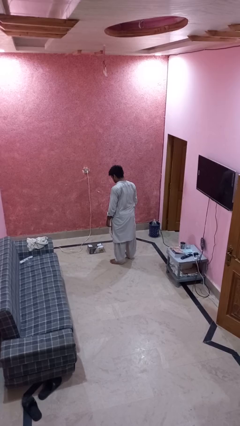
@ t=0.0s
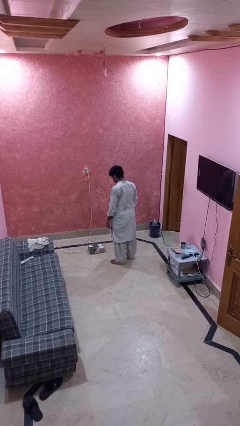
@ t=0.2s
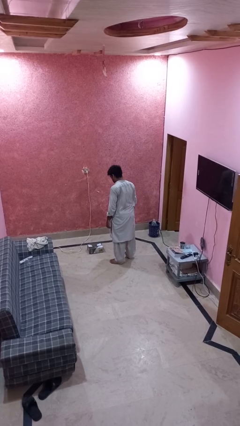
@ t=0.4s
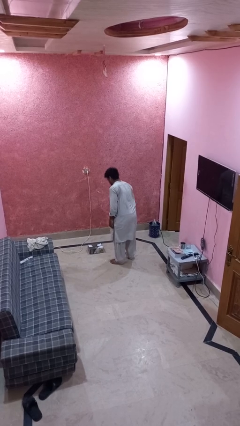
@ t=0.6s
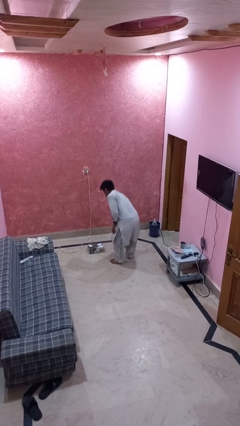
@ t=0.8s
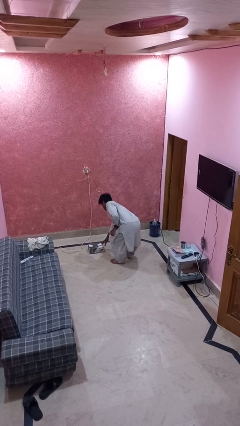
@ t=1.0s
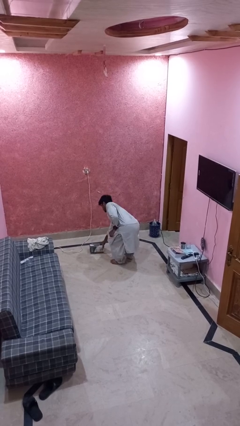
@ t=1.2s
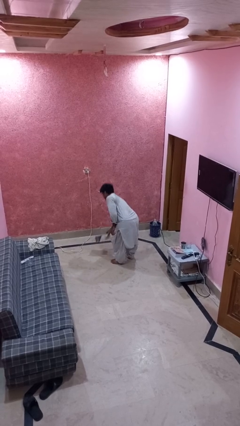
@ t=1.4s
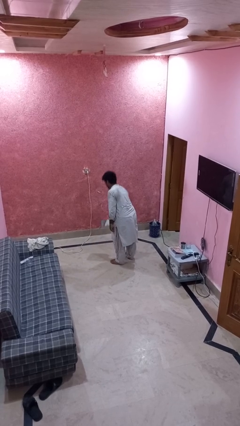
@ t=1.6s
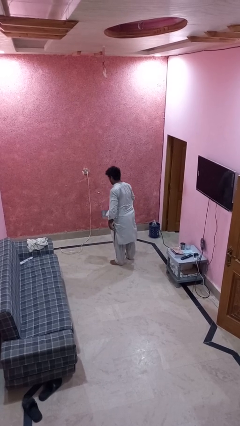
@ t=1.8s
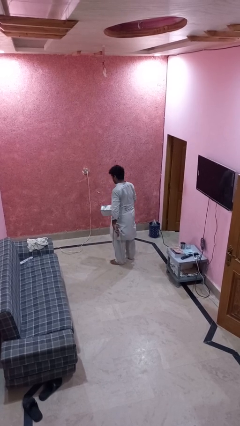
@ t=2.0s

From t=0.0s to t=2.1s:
person picks up object from floor

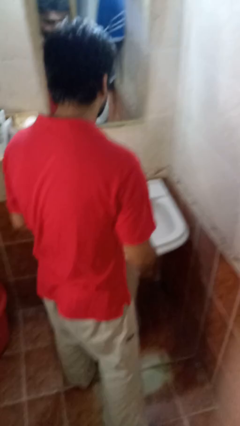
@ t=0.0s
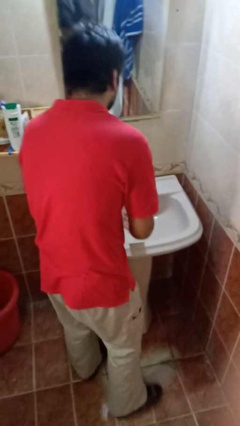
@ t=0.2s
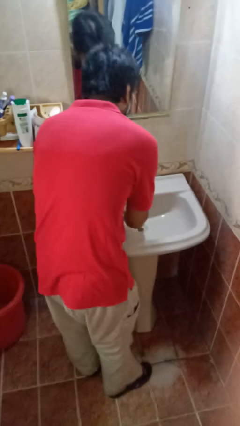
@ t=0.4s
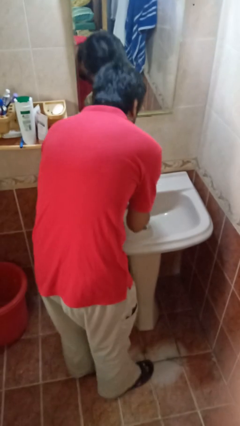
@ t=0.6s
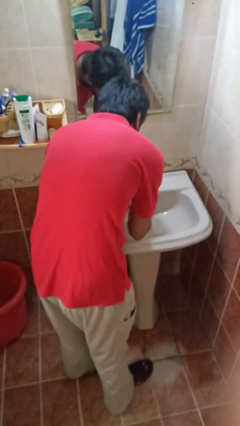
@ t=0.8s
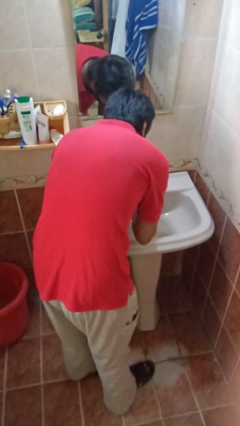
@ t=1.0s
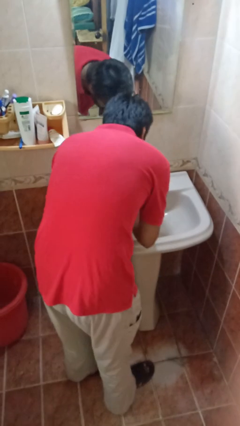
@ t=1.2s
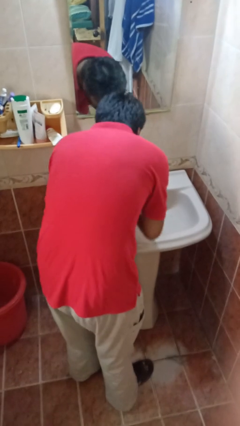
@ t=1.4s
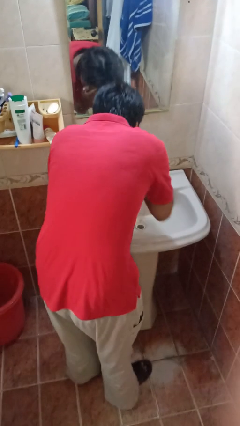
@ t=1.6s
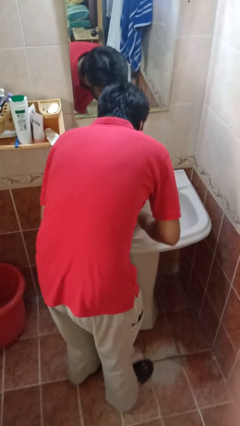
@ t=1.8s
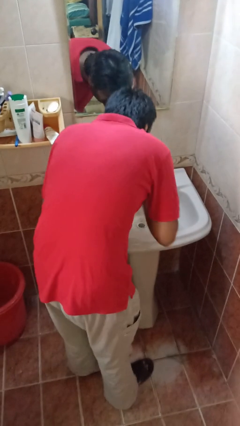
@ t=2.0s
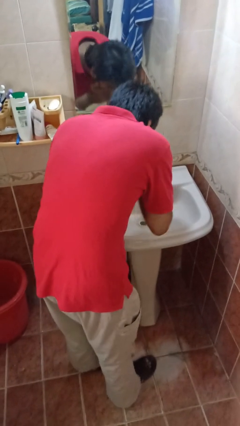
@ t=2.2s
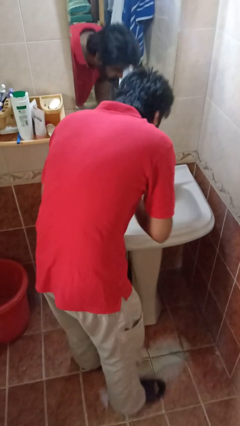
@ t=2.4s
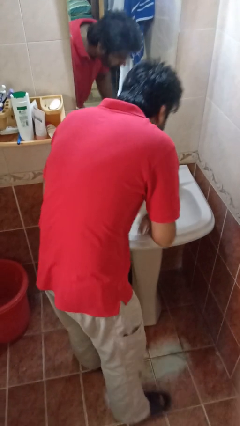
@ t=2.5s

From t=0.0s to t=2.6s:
person washes face

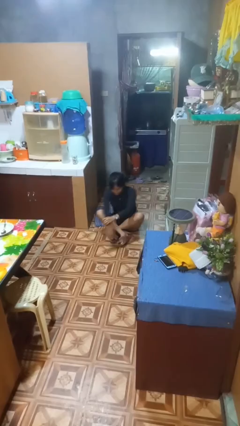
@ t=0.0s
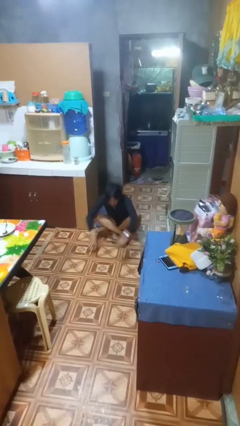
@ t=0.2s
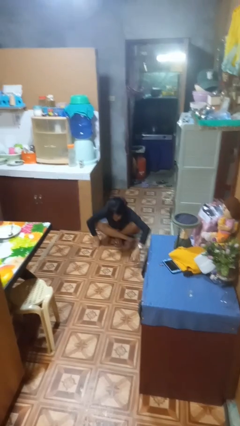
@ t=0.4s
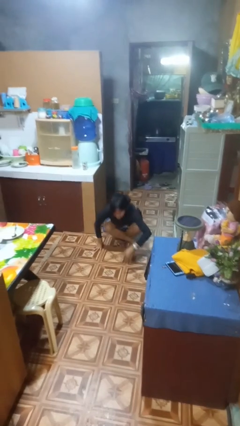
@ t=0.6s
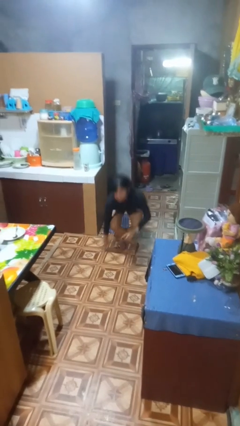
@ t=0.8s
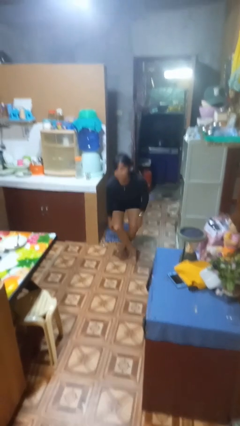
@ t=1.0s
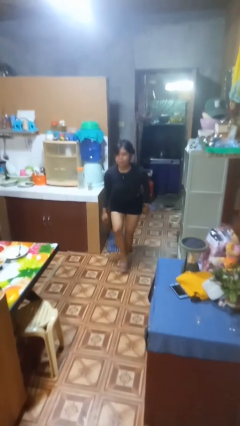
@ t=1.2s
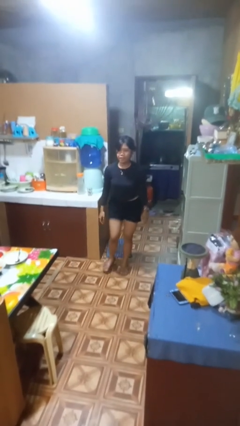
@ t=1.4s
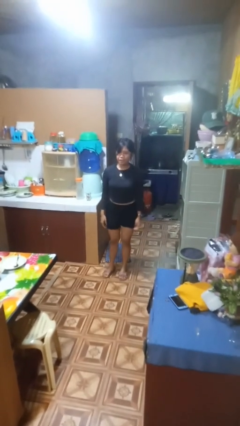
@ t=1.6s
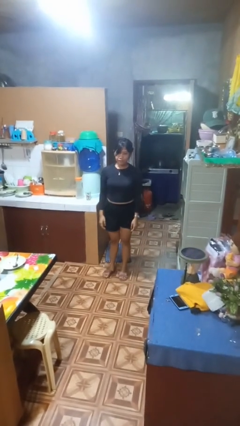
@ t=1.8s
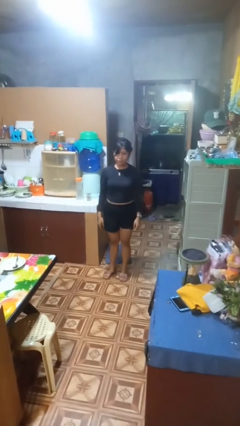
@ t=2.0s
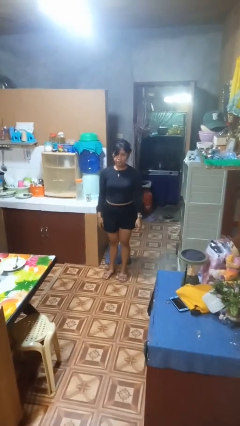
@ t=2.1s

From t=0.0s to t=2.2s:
person stands up from floor

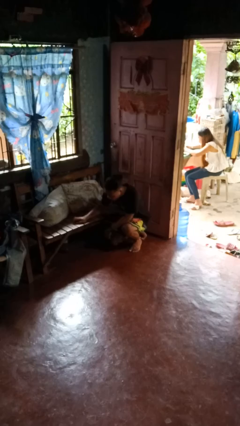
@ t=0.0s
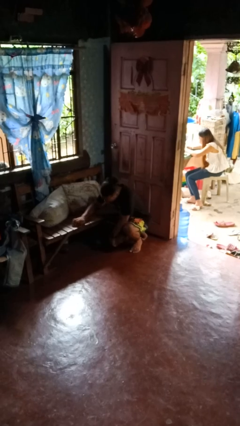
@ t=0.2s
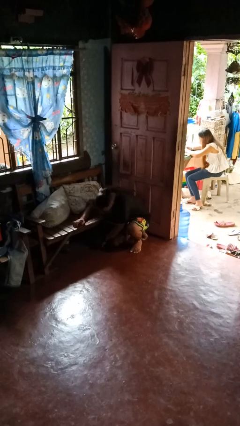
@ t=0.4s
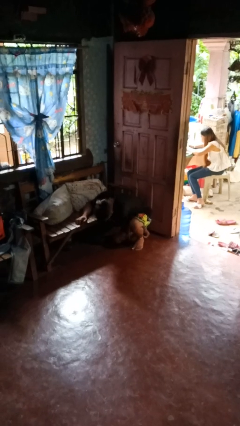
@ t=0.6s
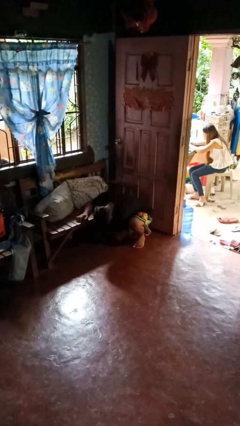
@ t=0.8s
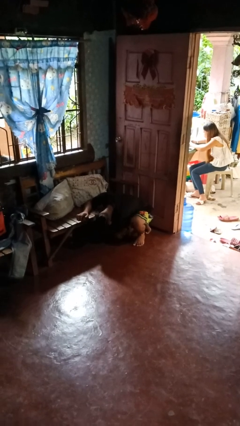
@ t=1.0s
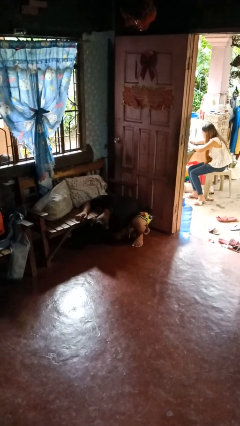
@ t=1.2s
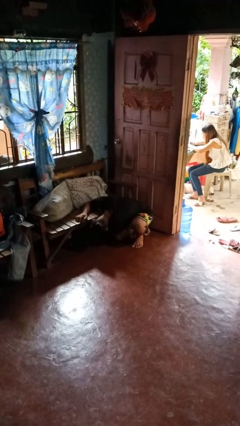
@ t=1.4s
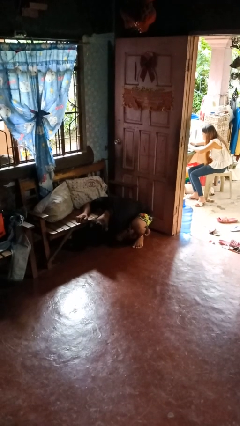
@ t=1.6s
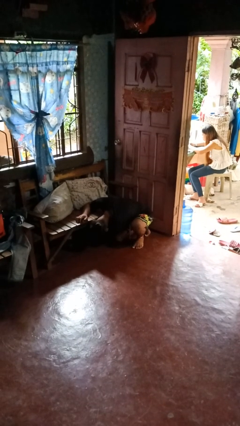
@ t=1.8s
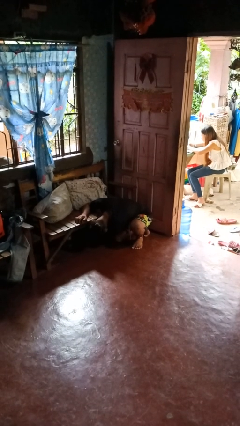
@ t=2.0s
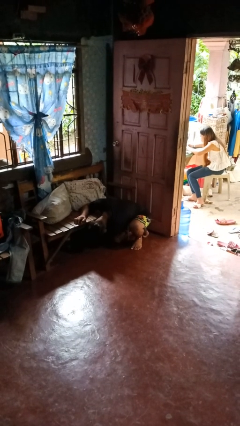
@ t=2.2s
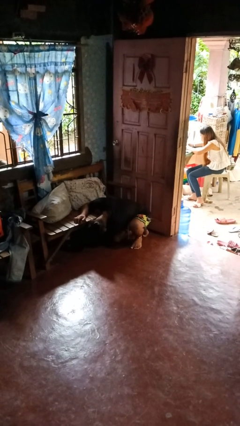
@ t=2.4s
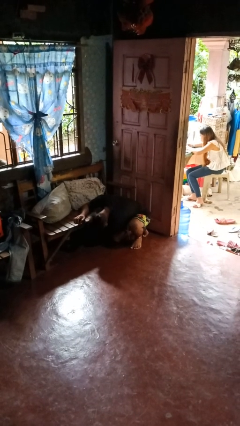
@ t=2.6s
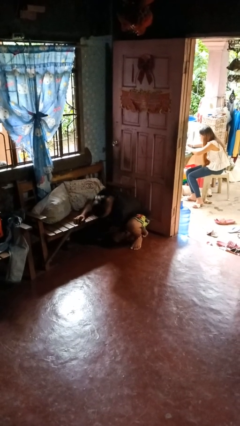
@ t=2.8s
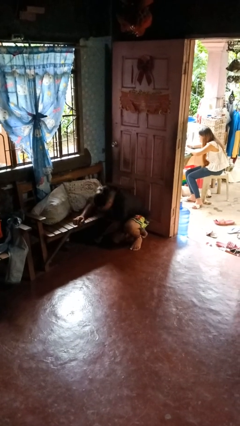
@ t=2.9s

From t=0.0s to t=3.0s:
person searches under couch

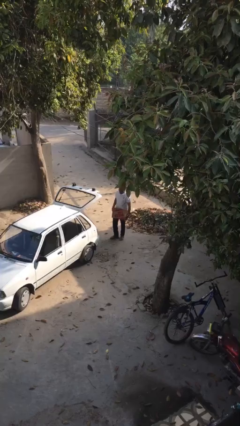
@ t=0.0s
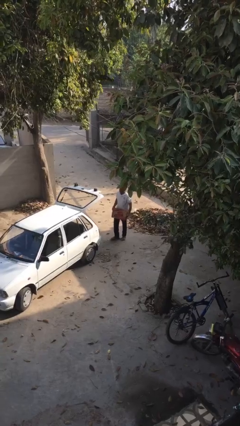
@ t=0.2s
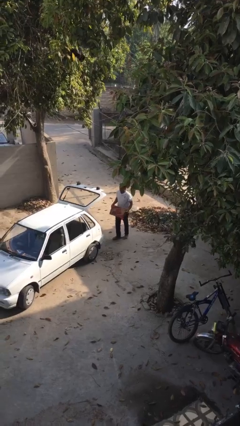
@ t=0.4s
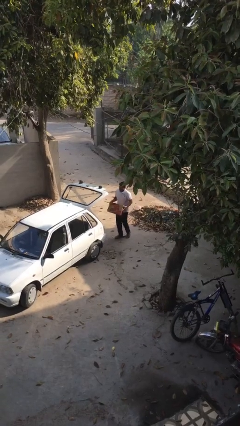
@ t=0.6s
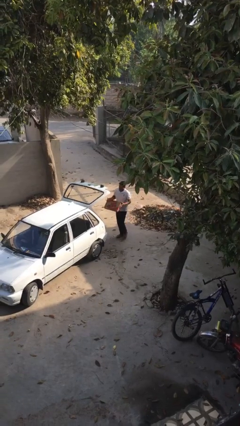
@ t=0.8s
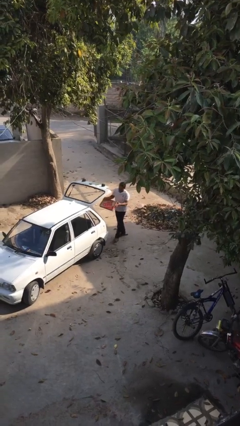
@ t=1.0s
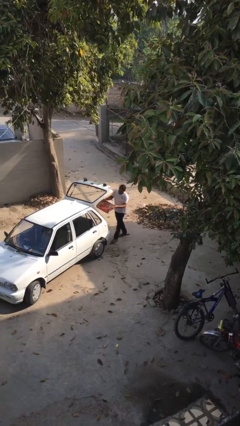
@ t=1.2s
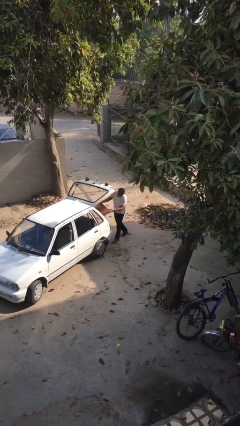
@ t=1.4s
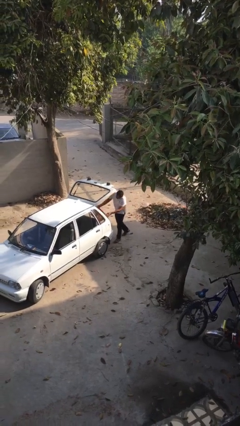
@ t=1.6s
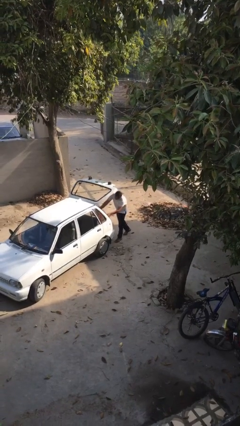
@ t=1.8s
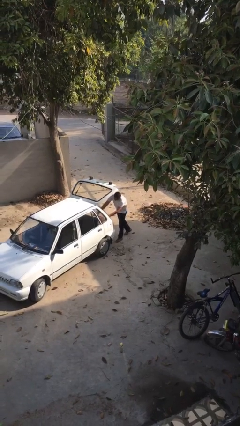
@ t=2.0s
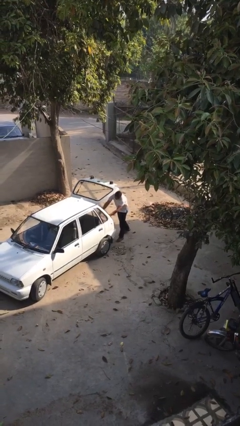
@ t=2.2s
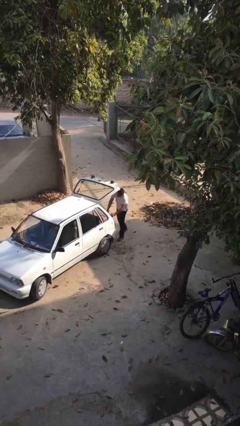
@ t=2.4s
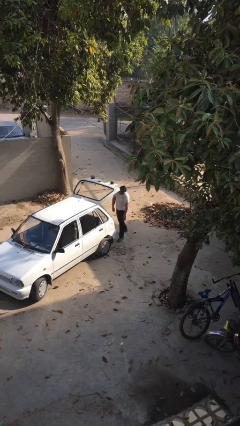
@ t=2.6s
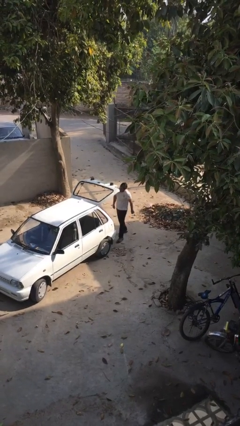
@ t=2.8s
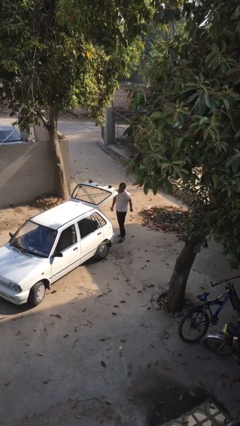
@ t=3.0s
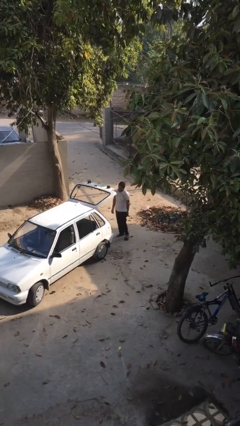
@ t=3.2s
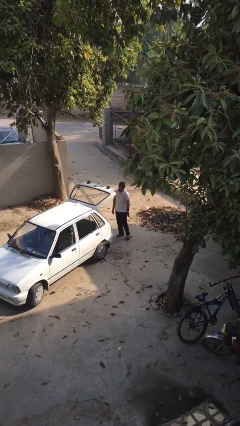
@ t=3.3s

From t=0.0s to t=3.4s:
person loads car

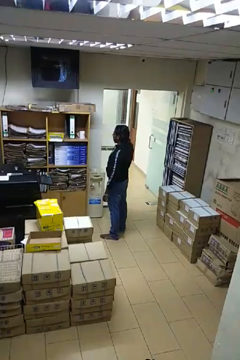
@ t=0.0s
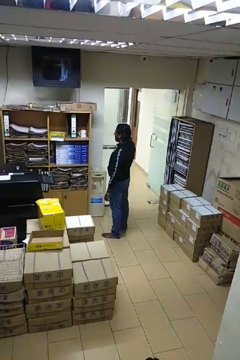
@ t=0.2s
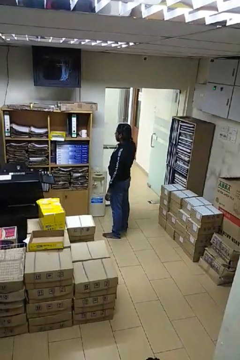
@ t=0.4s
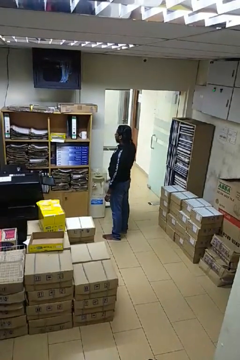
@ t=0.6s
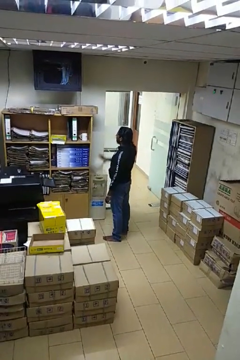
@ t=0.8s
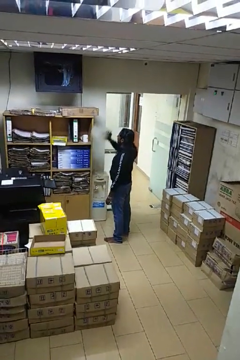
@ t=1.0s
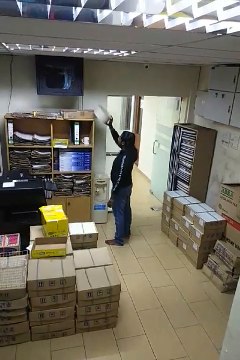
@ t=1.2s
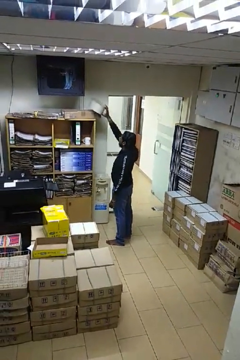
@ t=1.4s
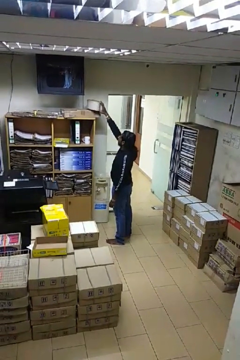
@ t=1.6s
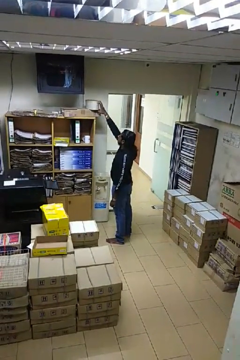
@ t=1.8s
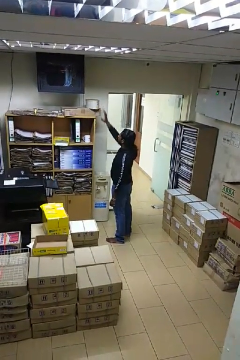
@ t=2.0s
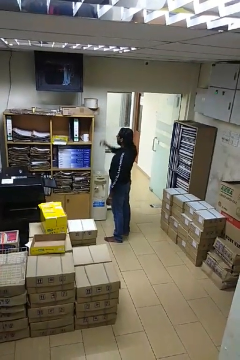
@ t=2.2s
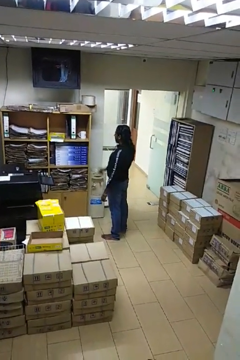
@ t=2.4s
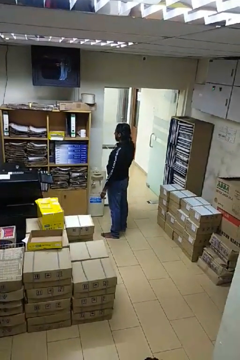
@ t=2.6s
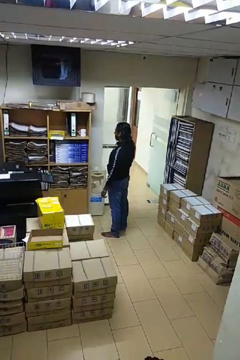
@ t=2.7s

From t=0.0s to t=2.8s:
person puts down object on shelf

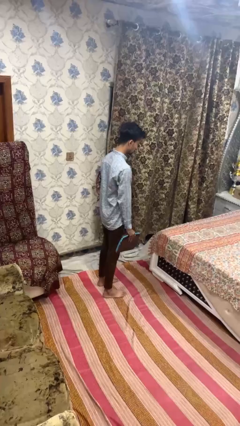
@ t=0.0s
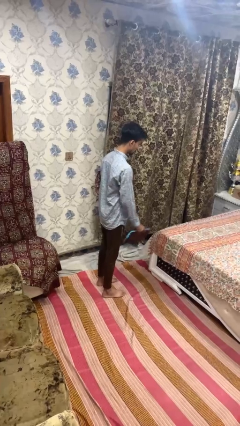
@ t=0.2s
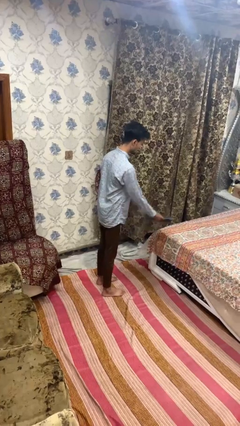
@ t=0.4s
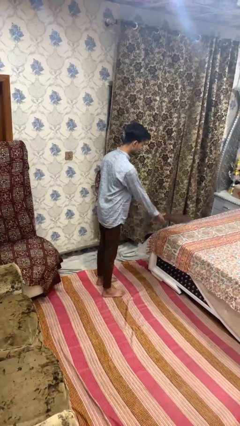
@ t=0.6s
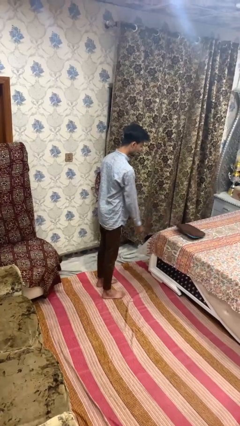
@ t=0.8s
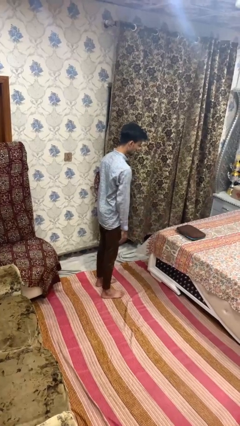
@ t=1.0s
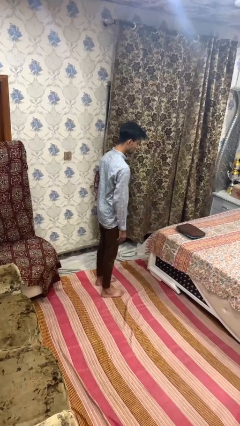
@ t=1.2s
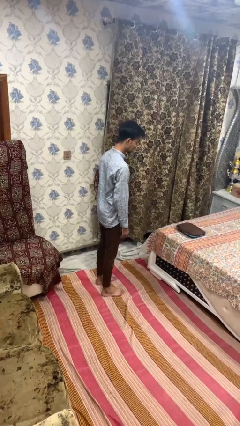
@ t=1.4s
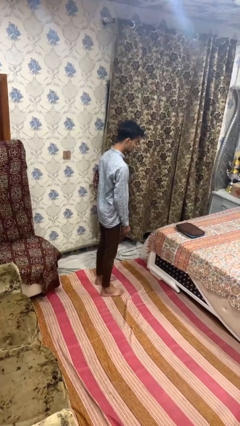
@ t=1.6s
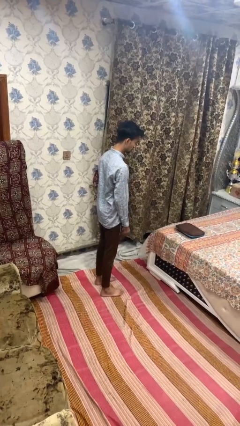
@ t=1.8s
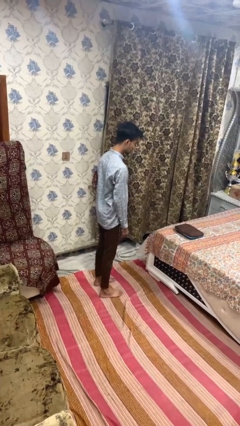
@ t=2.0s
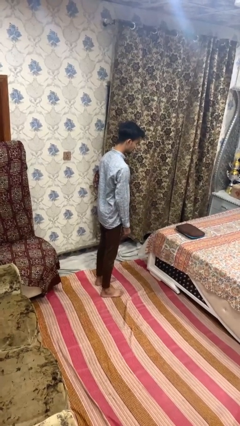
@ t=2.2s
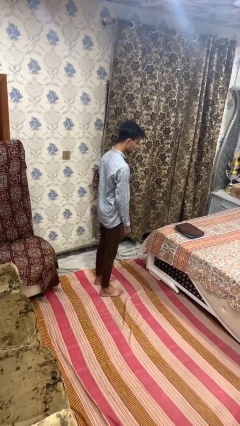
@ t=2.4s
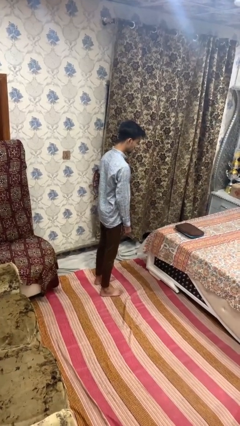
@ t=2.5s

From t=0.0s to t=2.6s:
person throws object on bed